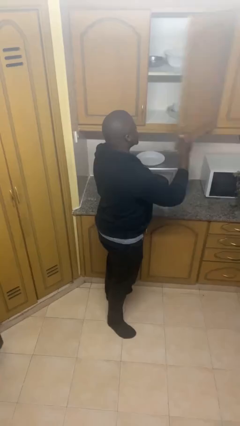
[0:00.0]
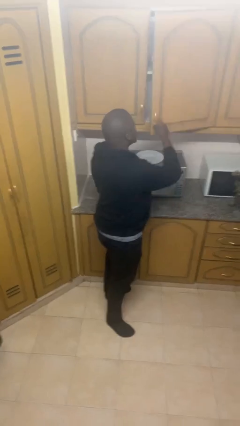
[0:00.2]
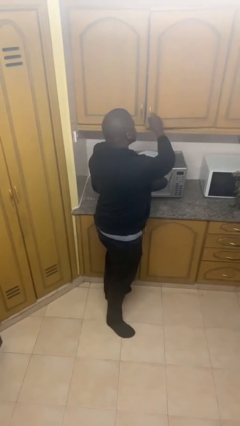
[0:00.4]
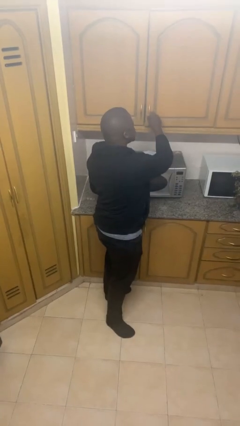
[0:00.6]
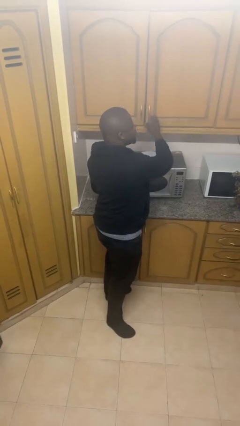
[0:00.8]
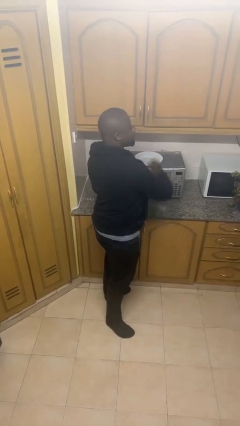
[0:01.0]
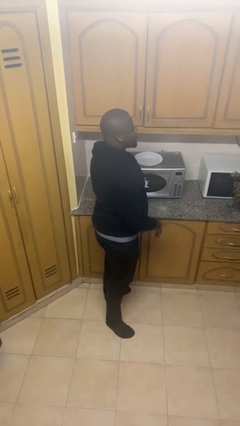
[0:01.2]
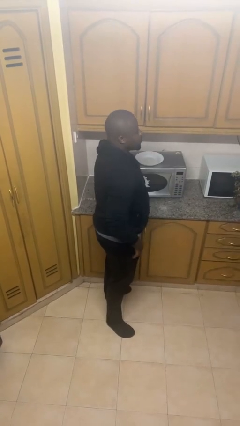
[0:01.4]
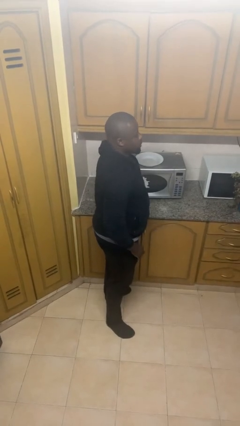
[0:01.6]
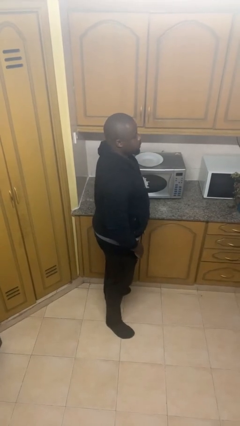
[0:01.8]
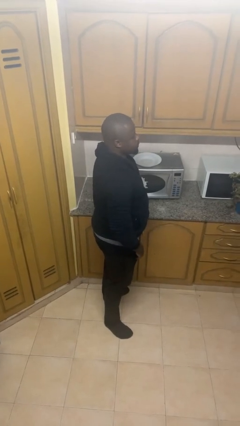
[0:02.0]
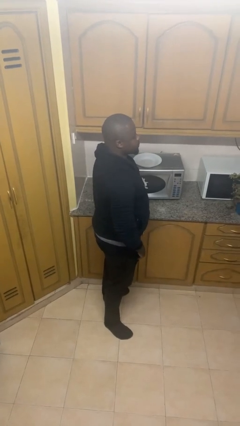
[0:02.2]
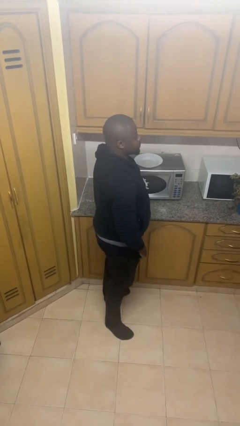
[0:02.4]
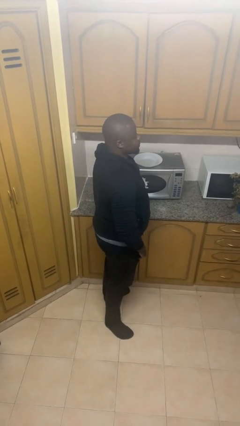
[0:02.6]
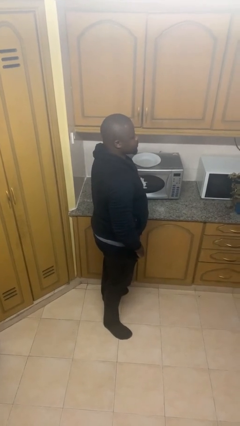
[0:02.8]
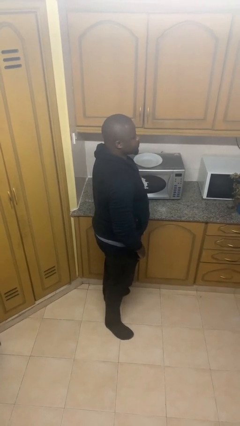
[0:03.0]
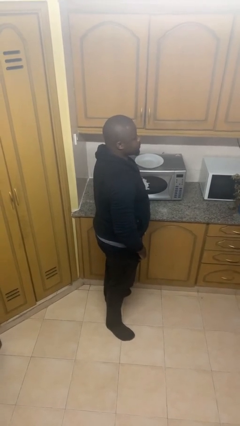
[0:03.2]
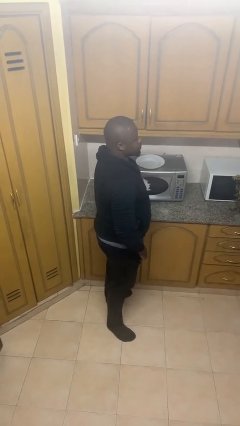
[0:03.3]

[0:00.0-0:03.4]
person closes cabinet

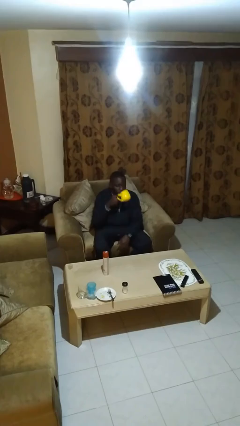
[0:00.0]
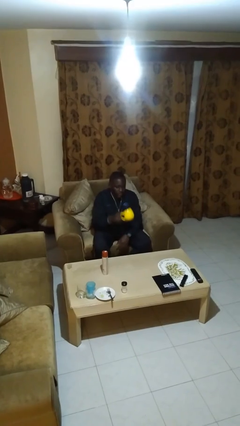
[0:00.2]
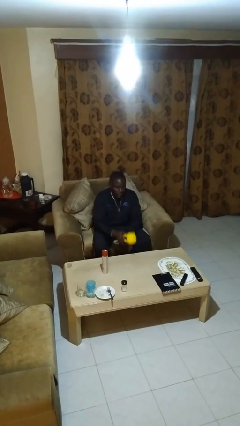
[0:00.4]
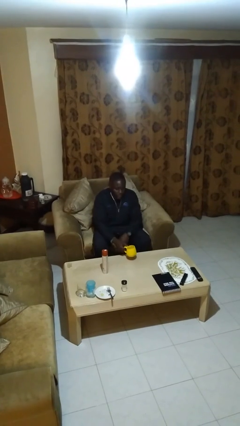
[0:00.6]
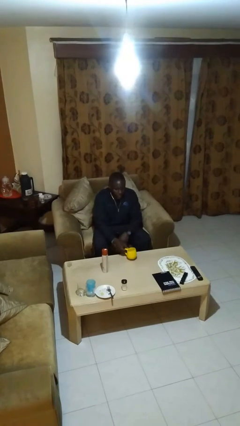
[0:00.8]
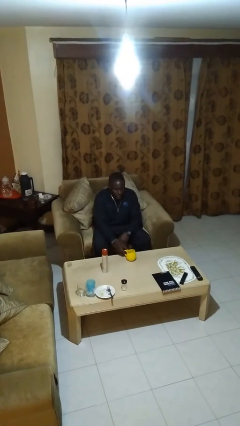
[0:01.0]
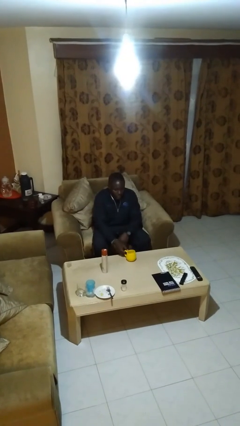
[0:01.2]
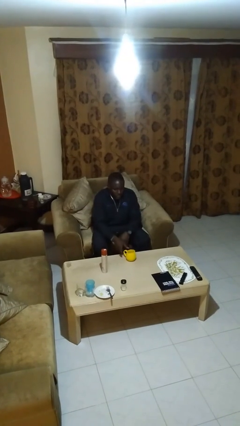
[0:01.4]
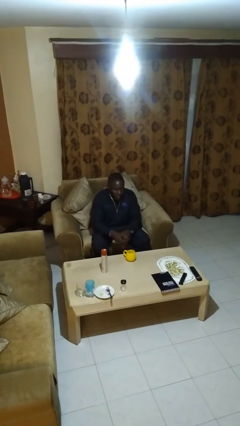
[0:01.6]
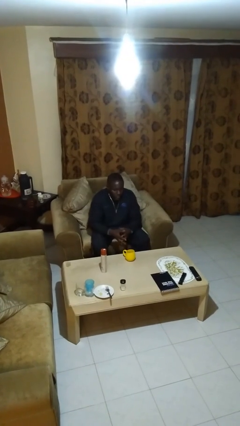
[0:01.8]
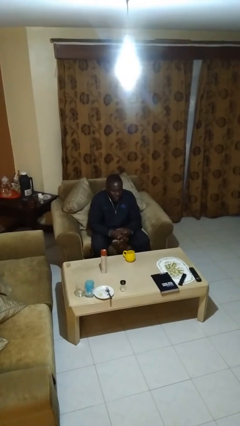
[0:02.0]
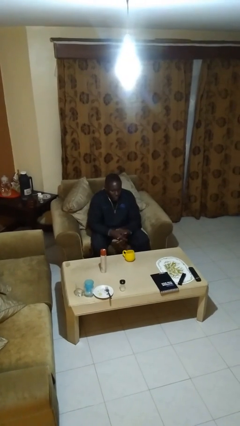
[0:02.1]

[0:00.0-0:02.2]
person puts down object on table

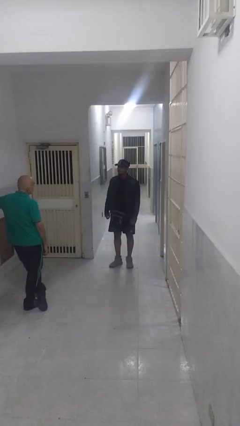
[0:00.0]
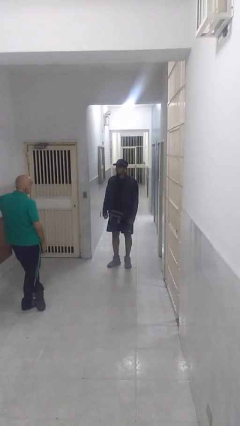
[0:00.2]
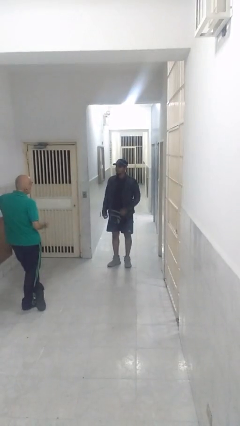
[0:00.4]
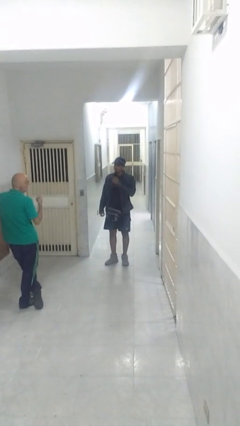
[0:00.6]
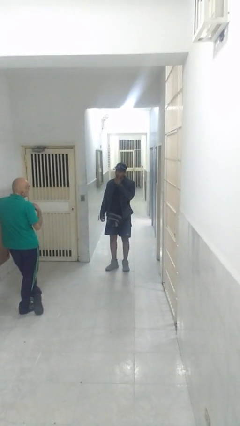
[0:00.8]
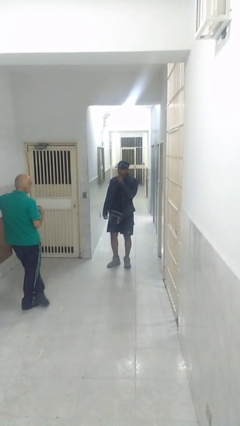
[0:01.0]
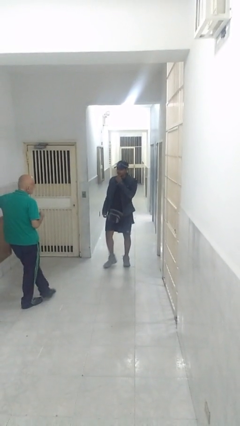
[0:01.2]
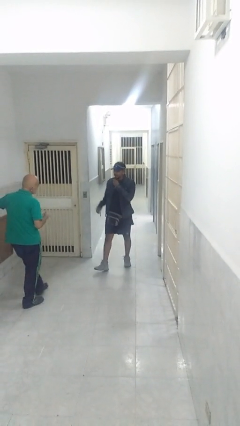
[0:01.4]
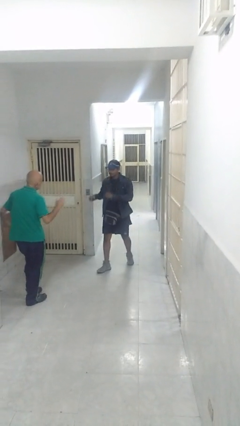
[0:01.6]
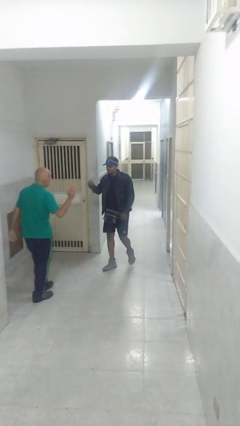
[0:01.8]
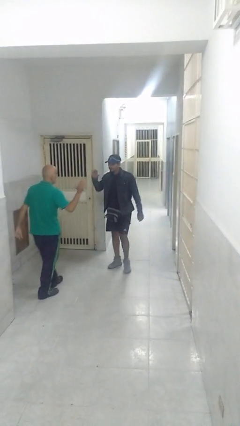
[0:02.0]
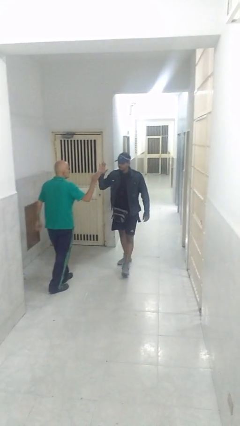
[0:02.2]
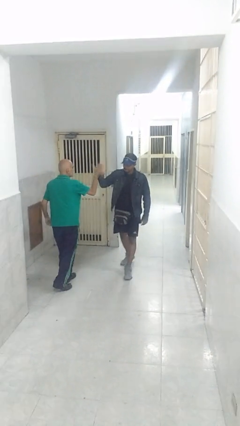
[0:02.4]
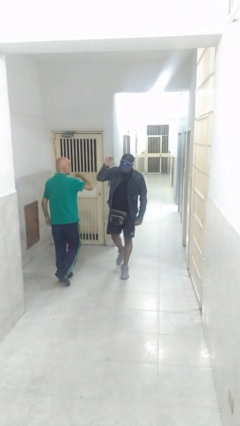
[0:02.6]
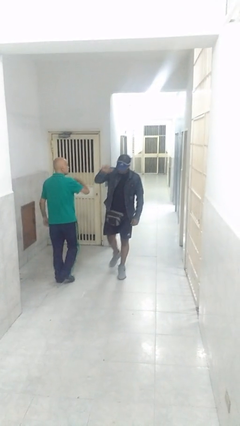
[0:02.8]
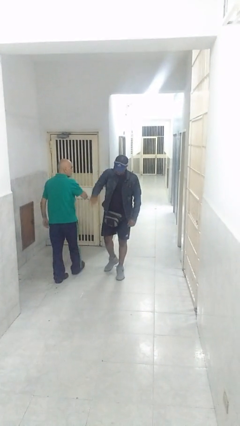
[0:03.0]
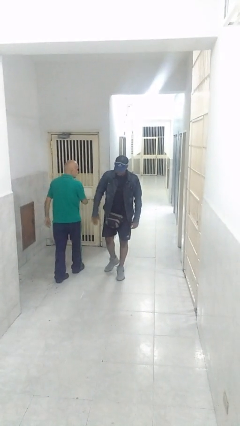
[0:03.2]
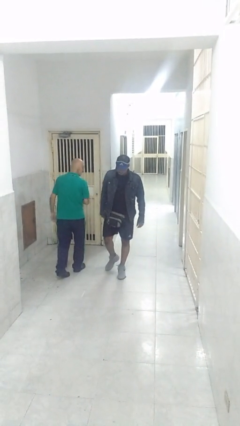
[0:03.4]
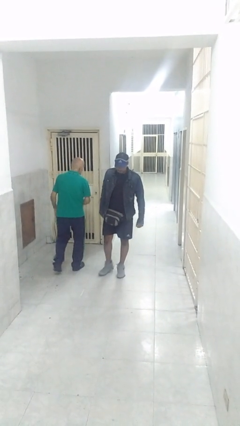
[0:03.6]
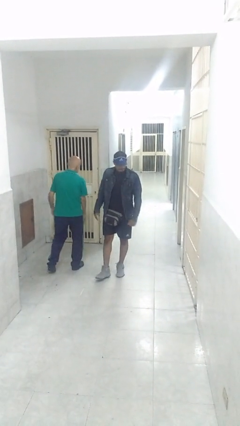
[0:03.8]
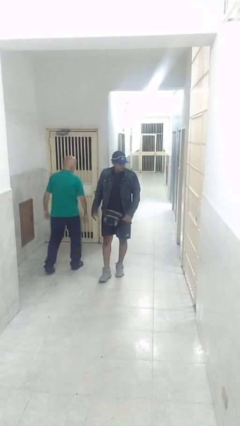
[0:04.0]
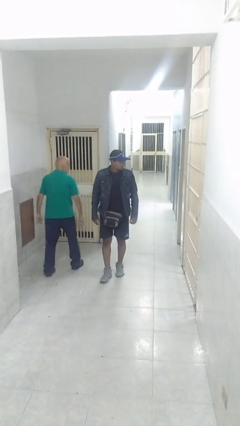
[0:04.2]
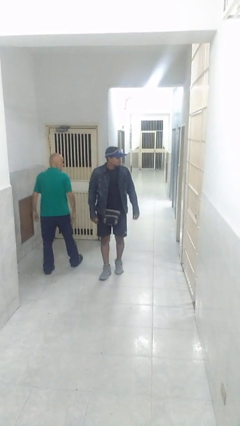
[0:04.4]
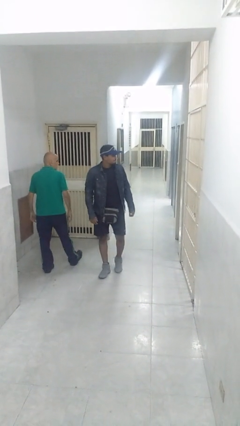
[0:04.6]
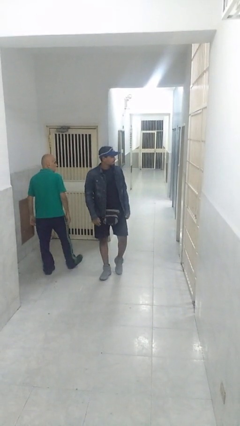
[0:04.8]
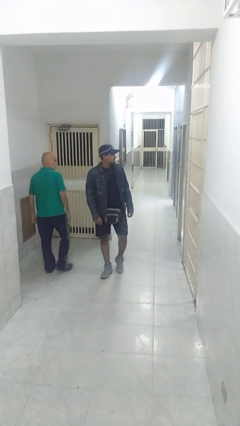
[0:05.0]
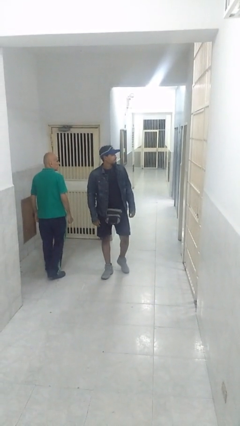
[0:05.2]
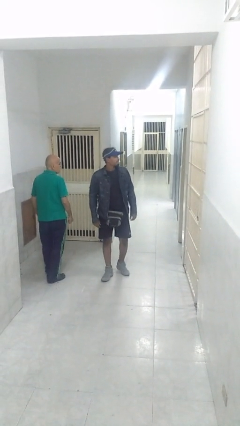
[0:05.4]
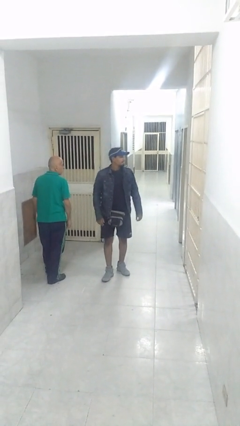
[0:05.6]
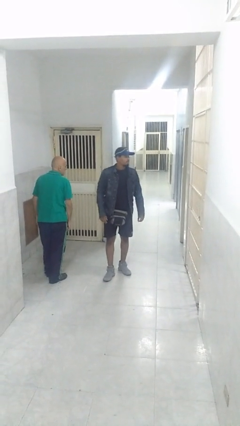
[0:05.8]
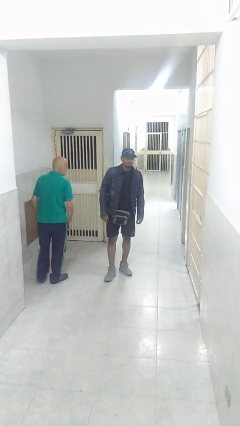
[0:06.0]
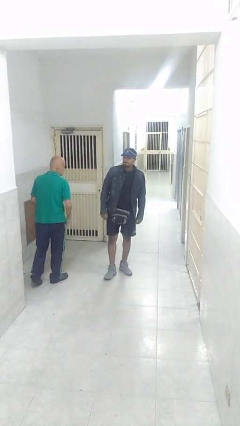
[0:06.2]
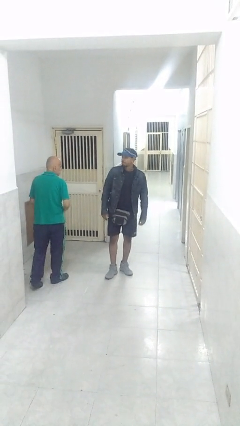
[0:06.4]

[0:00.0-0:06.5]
person highfives hand

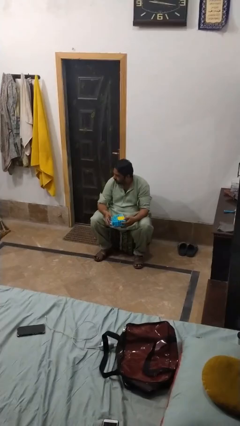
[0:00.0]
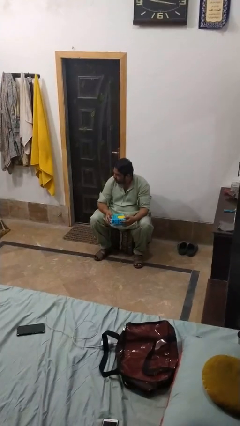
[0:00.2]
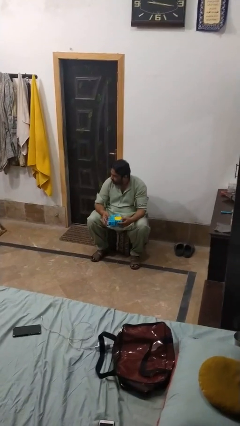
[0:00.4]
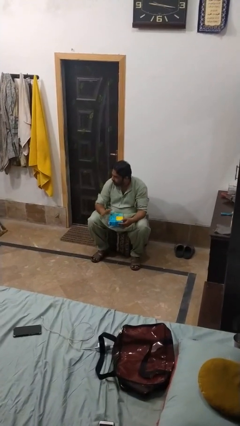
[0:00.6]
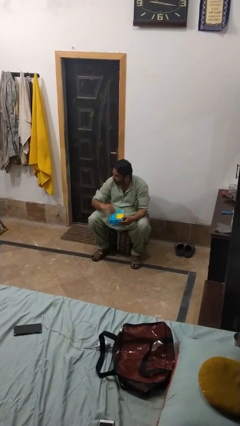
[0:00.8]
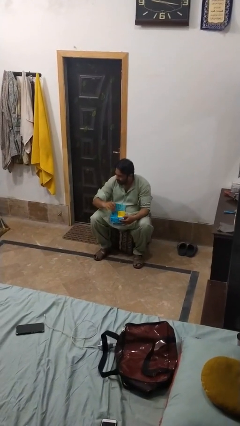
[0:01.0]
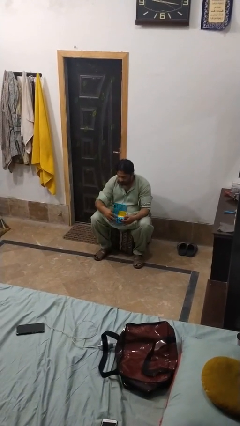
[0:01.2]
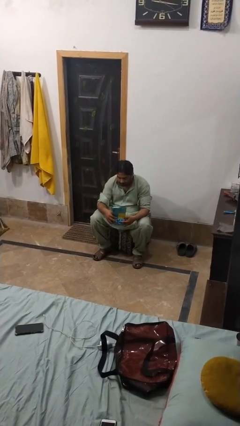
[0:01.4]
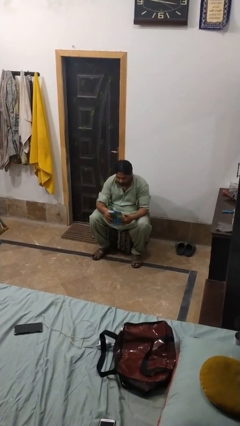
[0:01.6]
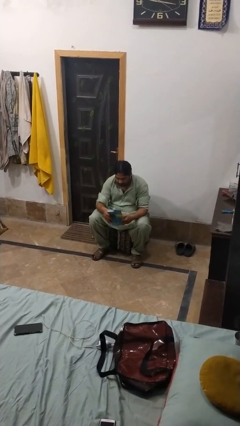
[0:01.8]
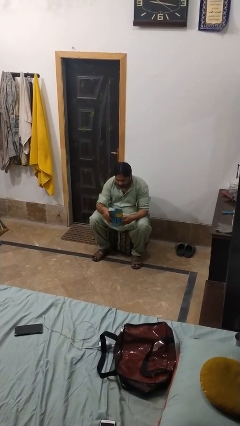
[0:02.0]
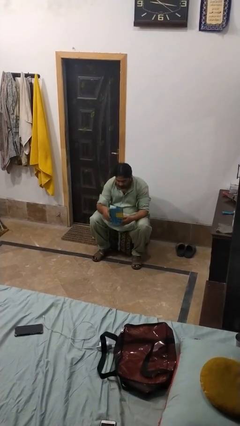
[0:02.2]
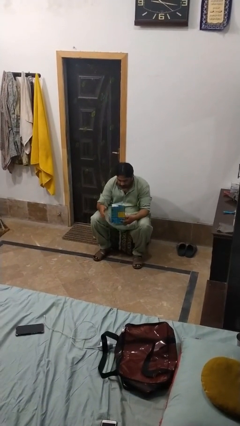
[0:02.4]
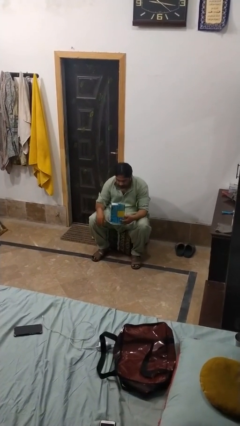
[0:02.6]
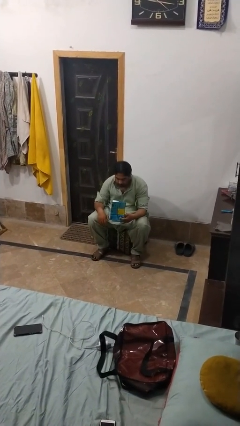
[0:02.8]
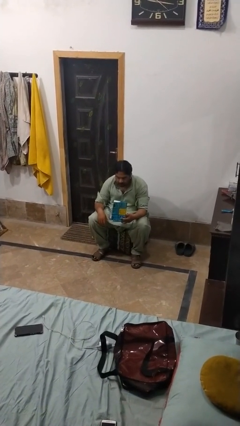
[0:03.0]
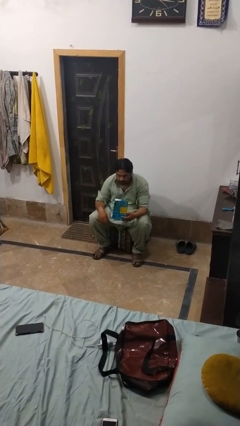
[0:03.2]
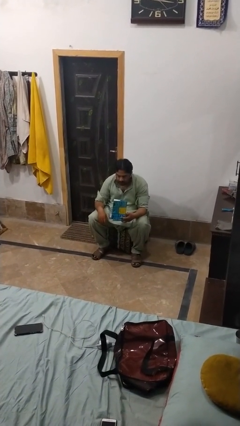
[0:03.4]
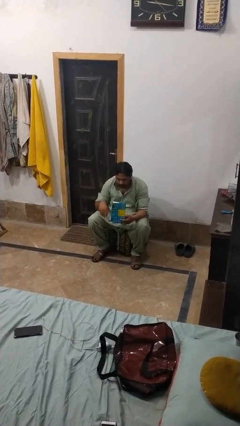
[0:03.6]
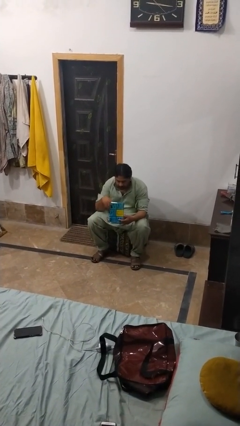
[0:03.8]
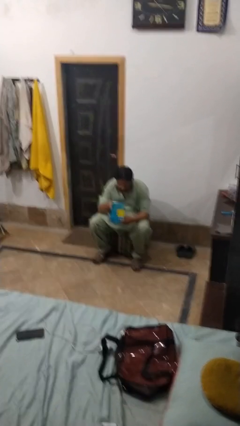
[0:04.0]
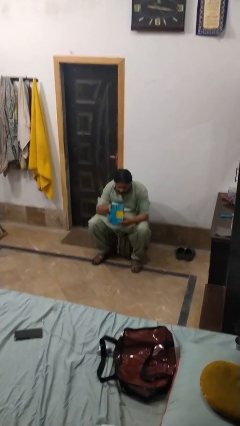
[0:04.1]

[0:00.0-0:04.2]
person opens jewelry box

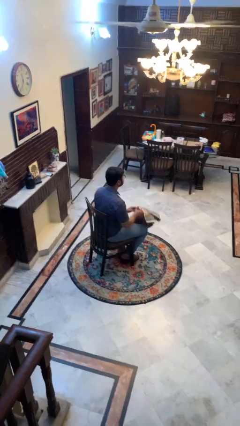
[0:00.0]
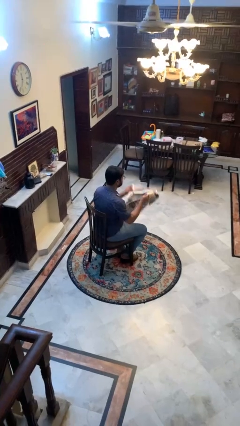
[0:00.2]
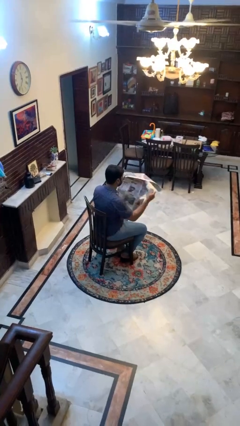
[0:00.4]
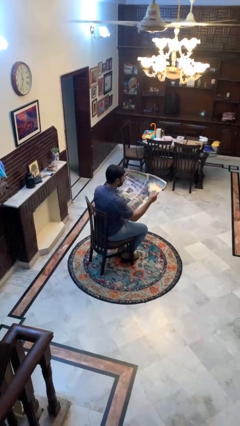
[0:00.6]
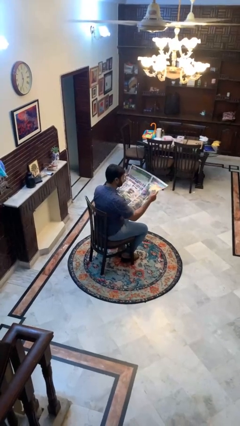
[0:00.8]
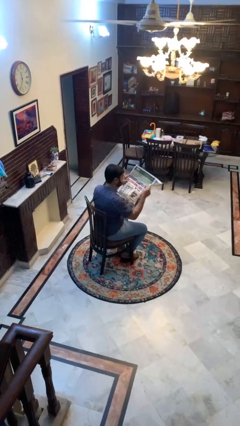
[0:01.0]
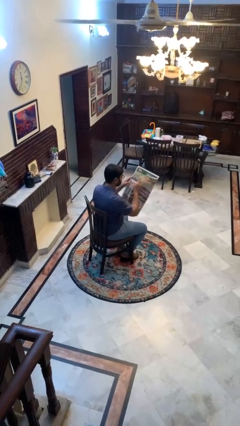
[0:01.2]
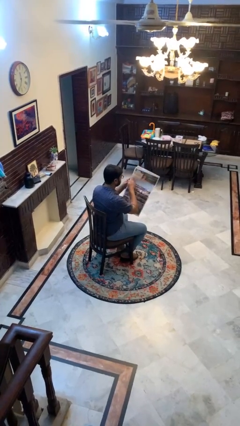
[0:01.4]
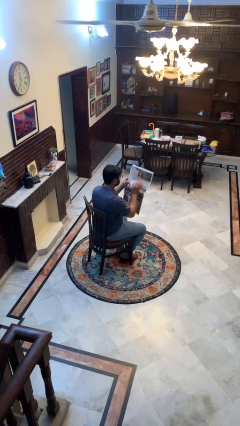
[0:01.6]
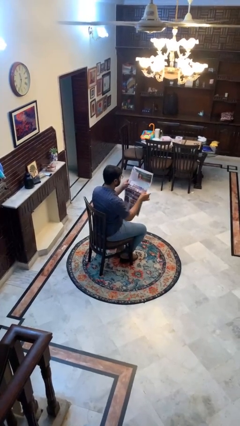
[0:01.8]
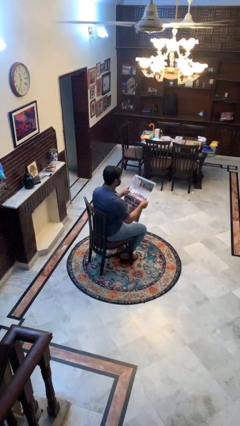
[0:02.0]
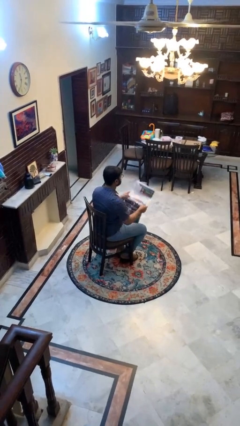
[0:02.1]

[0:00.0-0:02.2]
person reads newspaper
